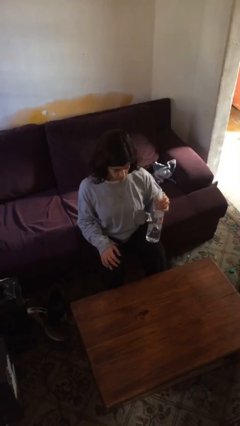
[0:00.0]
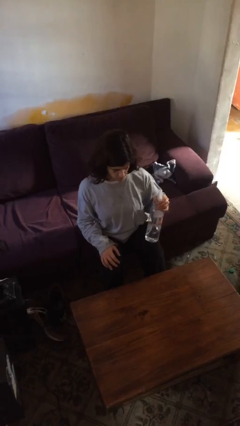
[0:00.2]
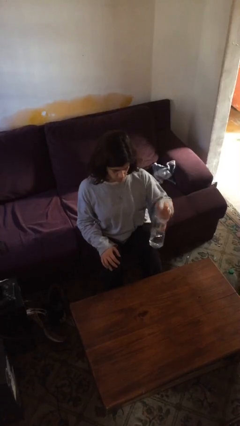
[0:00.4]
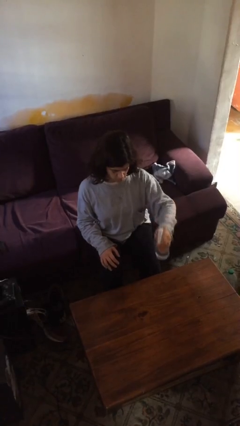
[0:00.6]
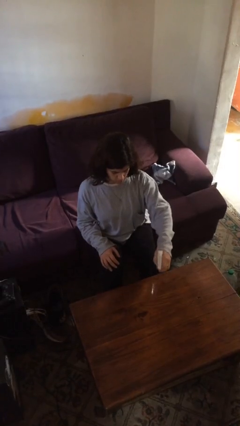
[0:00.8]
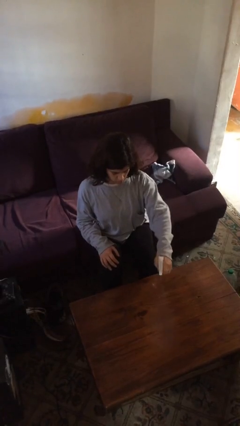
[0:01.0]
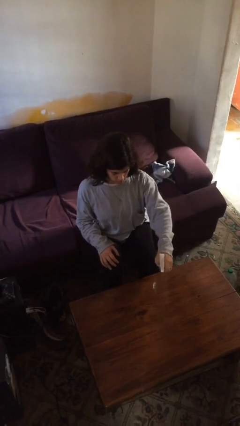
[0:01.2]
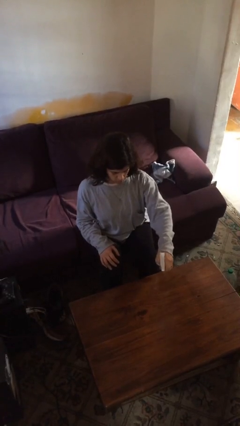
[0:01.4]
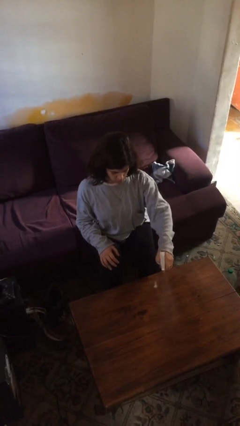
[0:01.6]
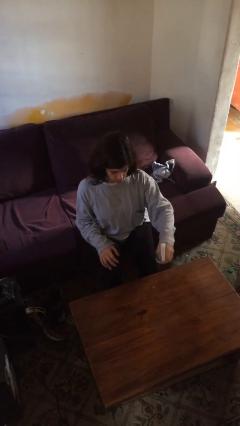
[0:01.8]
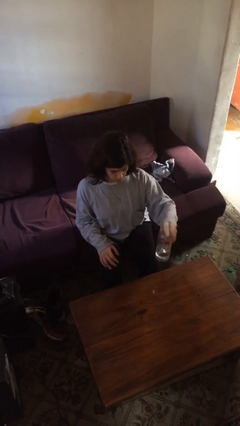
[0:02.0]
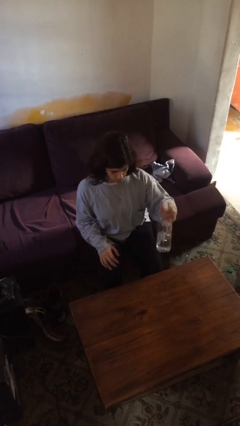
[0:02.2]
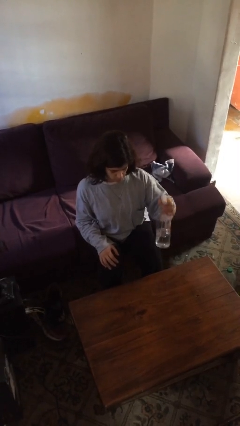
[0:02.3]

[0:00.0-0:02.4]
person sprays from bottle

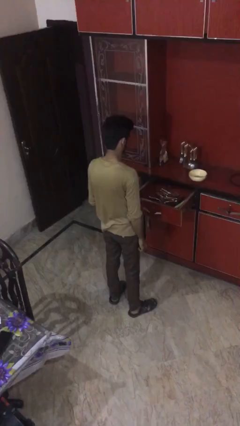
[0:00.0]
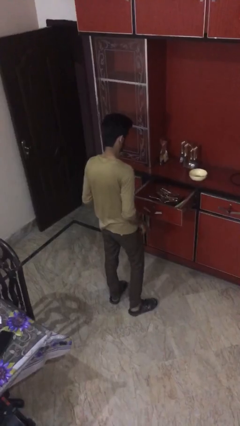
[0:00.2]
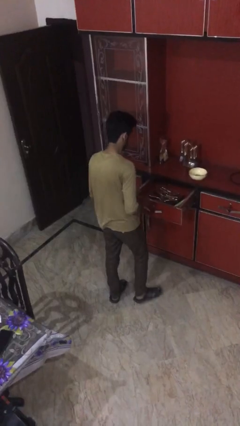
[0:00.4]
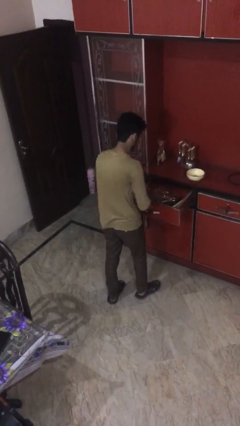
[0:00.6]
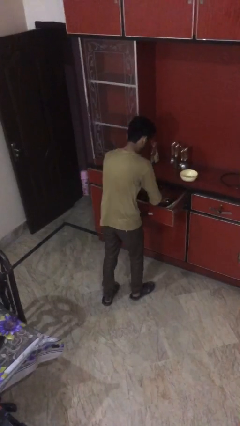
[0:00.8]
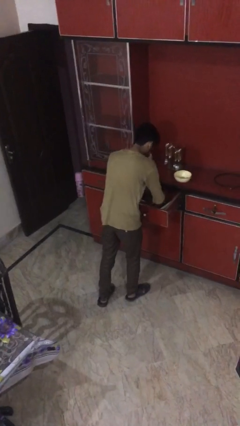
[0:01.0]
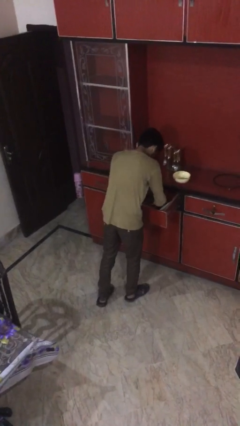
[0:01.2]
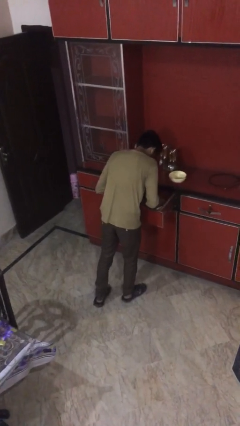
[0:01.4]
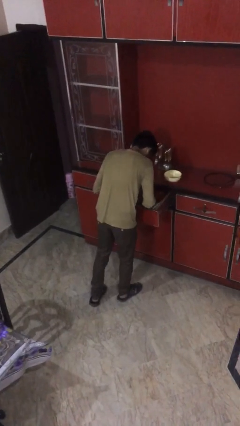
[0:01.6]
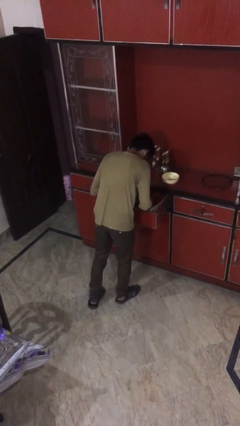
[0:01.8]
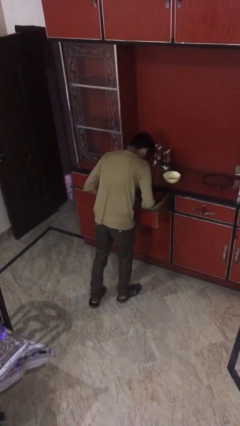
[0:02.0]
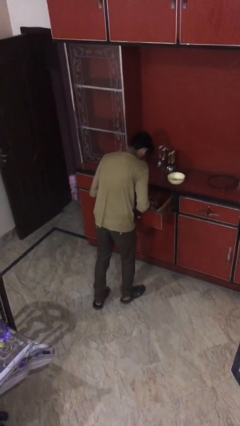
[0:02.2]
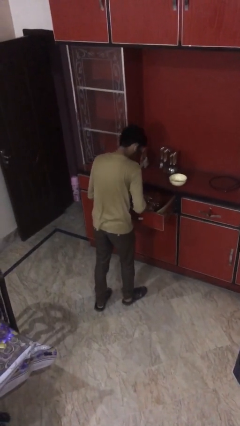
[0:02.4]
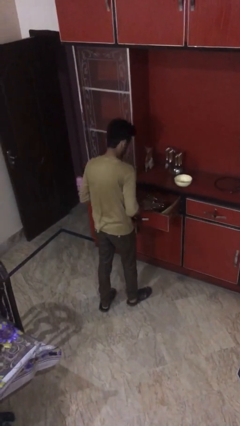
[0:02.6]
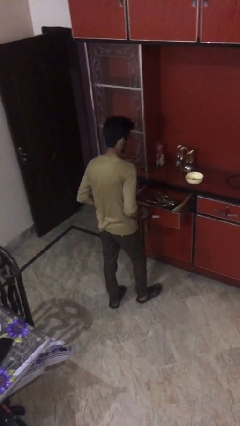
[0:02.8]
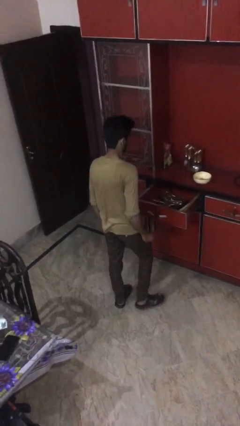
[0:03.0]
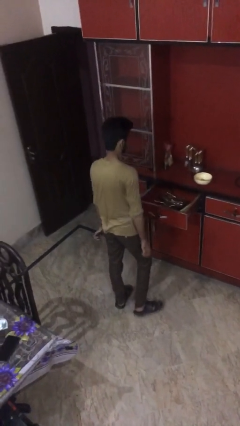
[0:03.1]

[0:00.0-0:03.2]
person searches in kitchen drawer

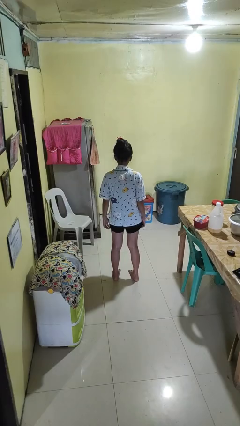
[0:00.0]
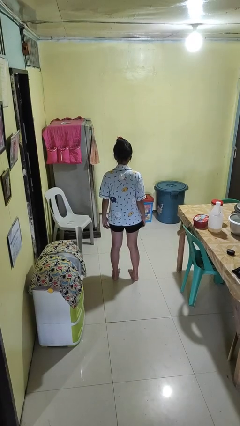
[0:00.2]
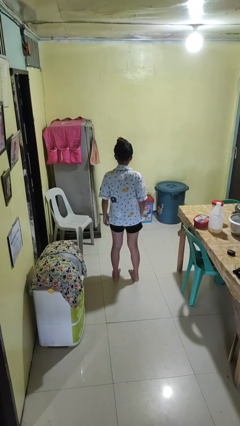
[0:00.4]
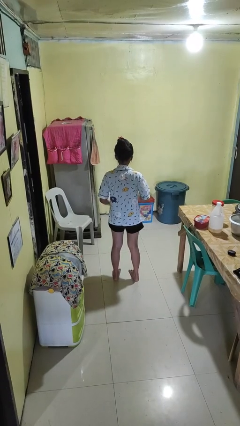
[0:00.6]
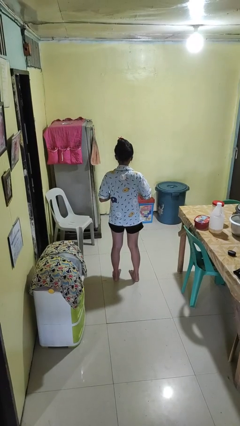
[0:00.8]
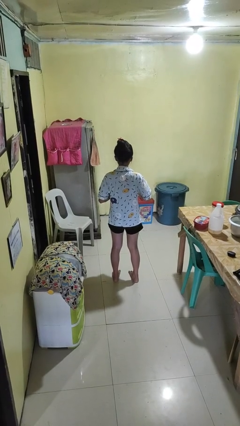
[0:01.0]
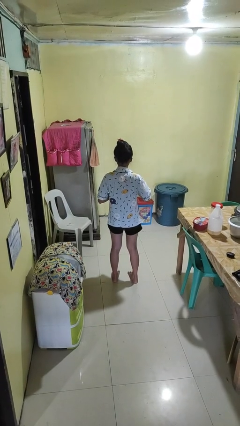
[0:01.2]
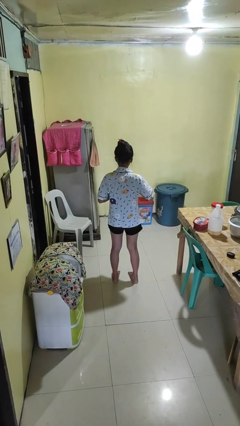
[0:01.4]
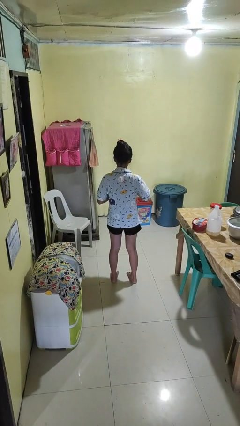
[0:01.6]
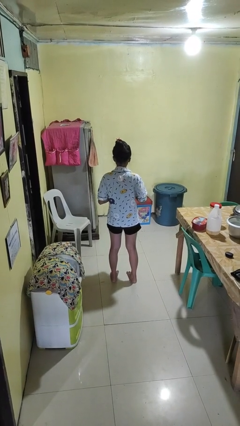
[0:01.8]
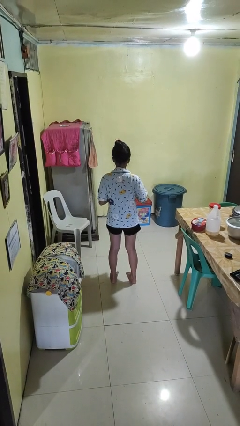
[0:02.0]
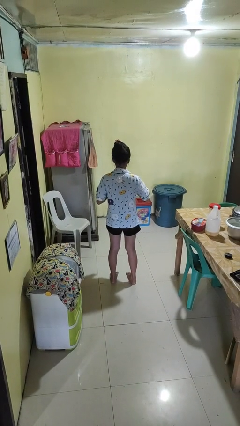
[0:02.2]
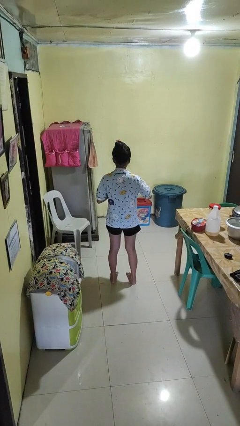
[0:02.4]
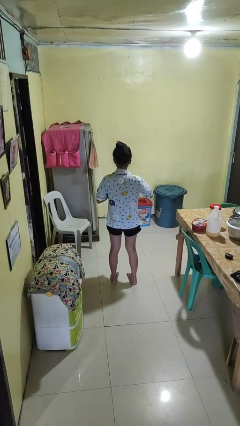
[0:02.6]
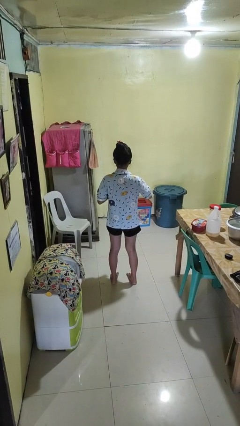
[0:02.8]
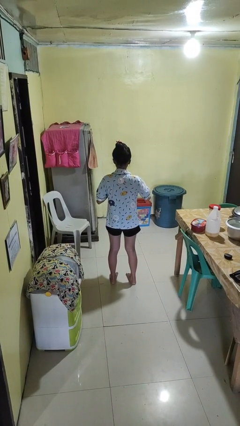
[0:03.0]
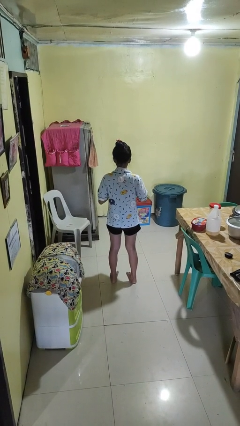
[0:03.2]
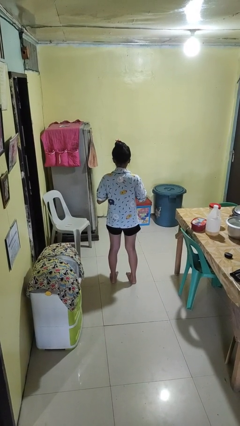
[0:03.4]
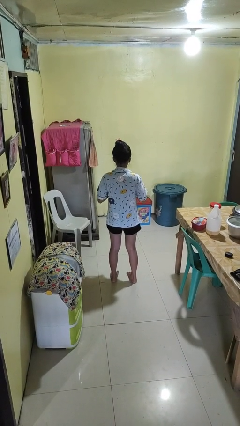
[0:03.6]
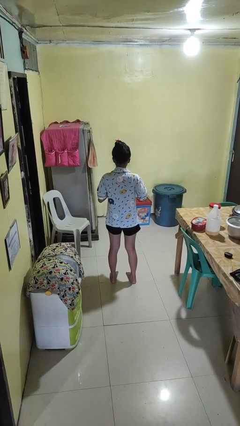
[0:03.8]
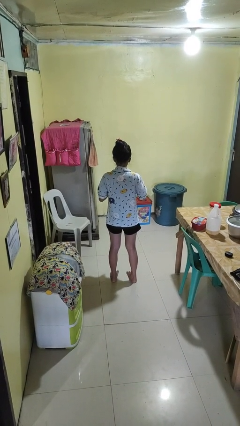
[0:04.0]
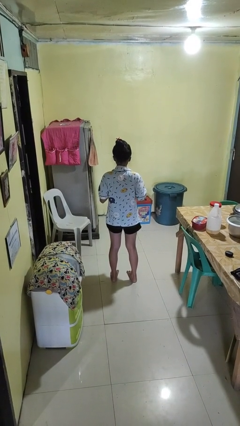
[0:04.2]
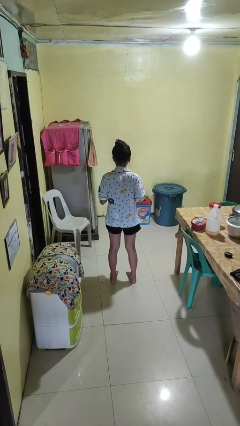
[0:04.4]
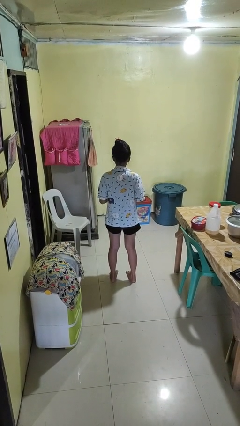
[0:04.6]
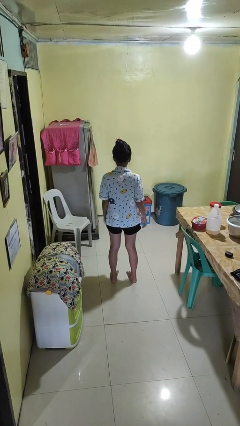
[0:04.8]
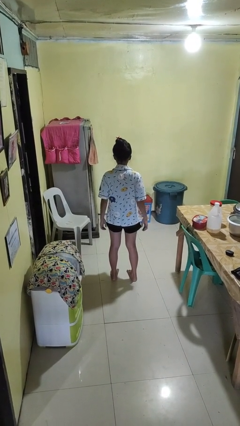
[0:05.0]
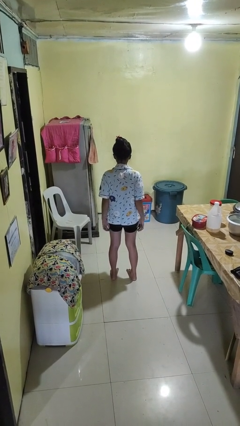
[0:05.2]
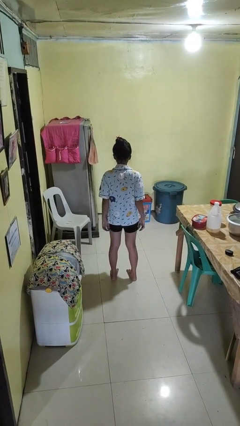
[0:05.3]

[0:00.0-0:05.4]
person unbuttons shirt

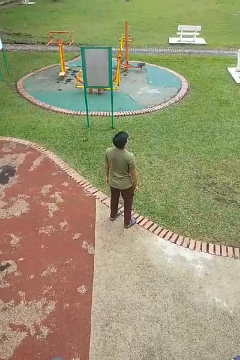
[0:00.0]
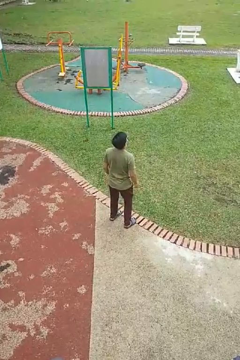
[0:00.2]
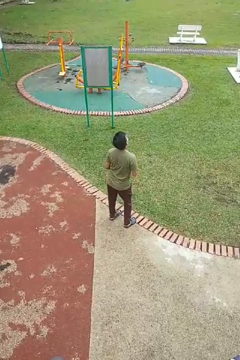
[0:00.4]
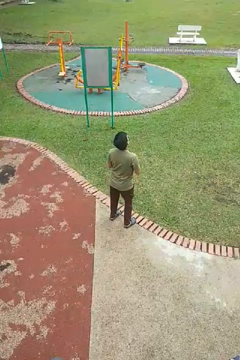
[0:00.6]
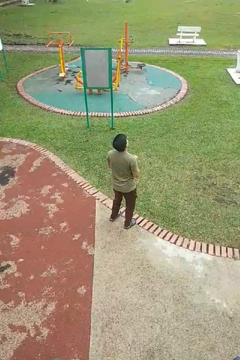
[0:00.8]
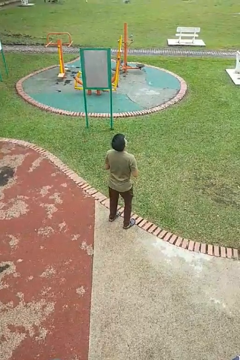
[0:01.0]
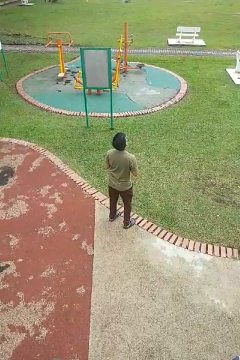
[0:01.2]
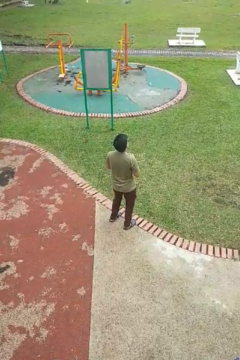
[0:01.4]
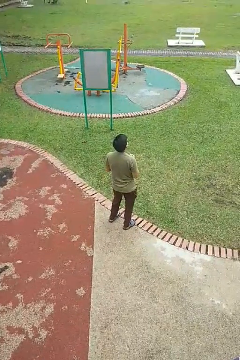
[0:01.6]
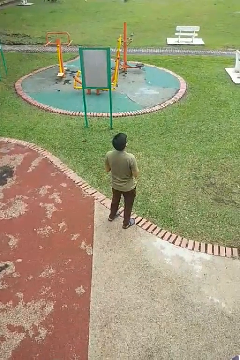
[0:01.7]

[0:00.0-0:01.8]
person wiggles hips

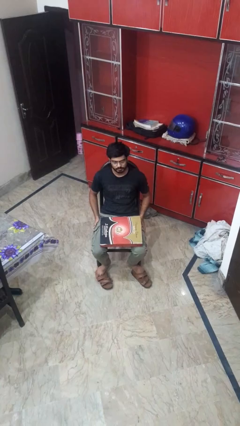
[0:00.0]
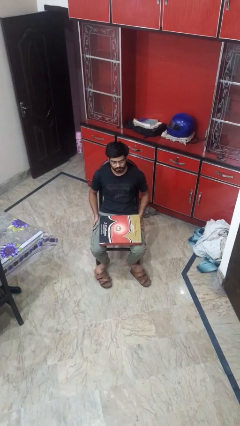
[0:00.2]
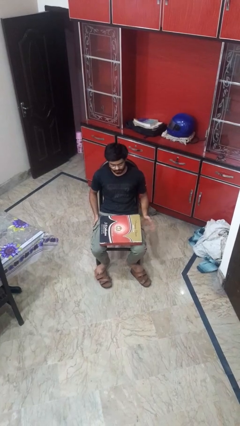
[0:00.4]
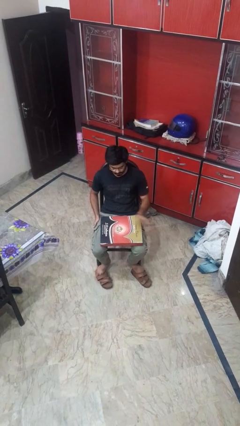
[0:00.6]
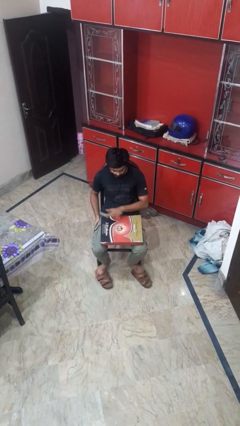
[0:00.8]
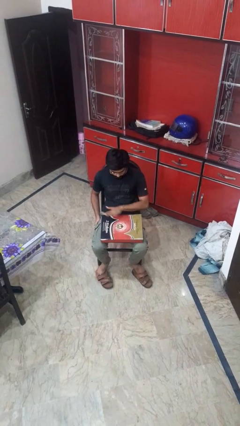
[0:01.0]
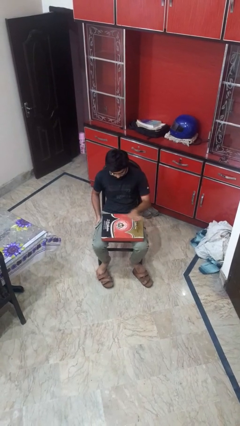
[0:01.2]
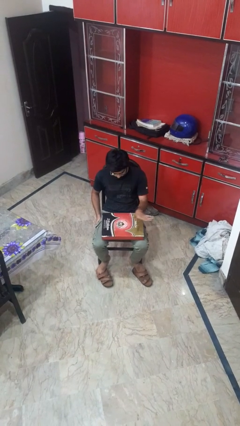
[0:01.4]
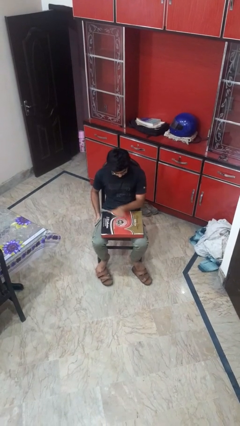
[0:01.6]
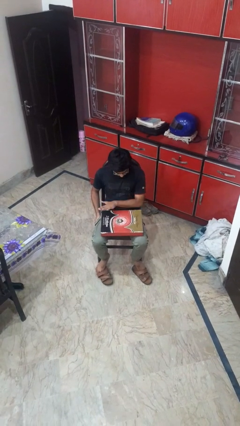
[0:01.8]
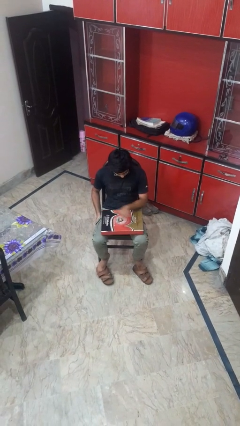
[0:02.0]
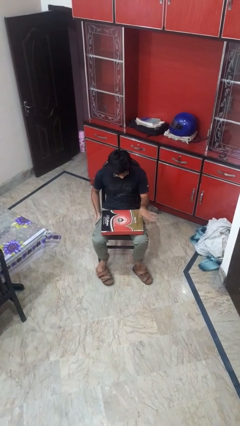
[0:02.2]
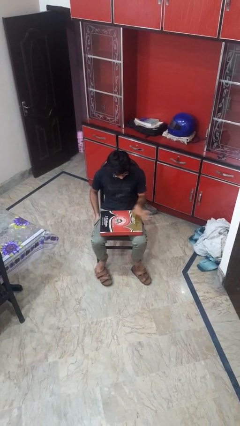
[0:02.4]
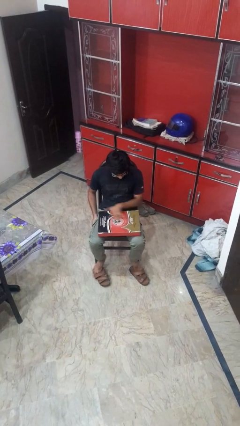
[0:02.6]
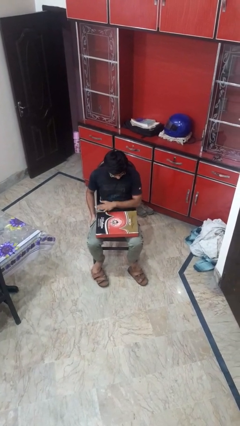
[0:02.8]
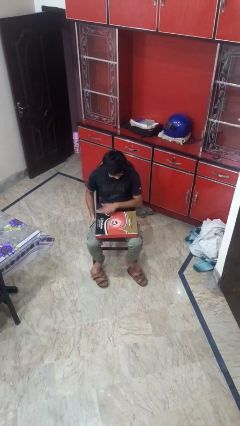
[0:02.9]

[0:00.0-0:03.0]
person waves hand over object

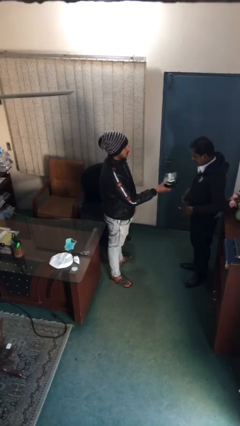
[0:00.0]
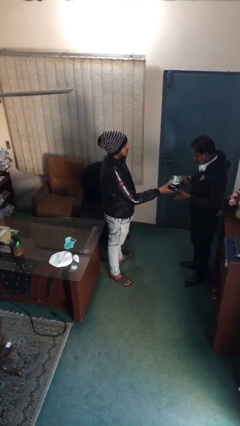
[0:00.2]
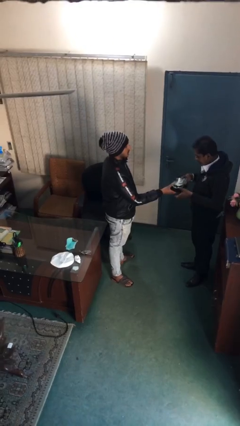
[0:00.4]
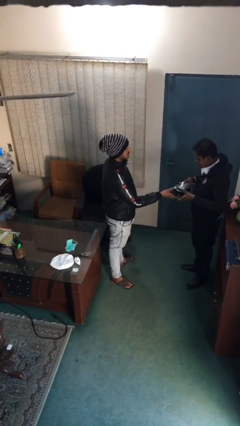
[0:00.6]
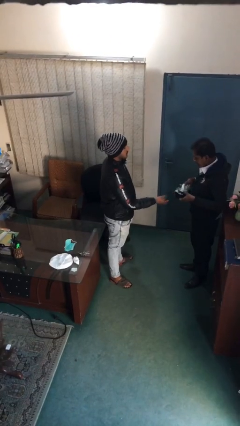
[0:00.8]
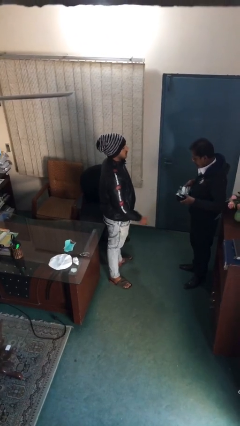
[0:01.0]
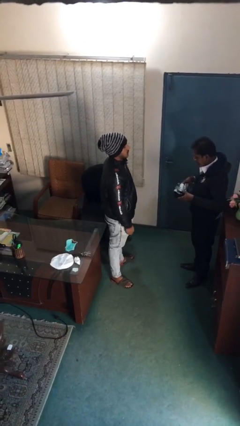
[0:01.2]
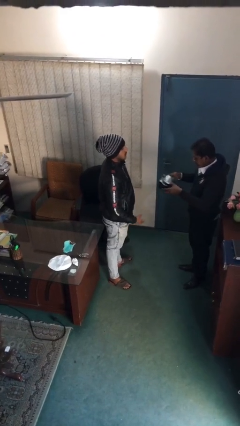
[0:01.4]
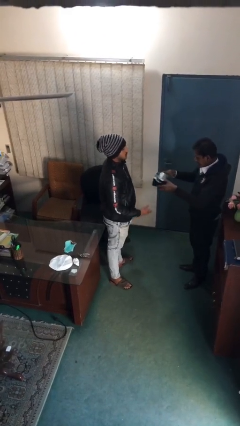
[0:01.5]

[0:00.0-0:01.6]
person transfers object to person
